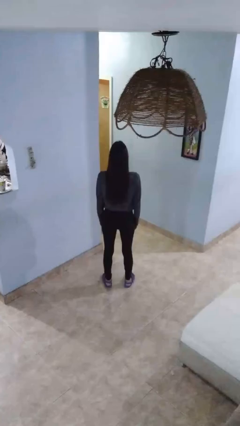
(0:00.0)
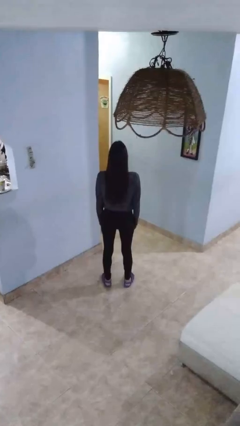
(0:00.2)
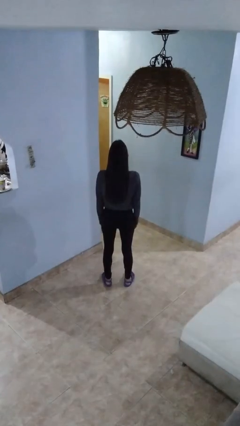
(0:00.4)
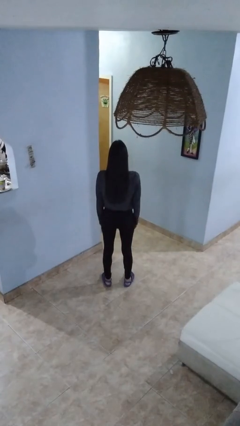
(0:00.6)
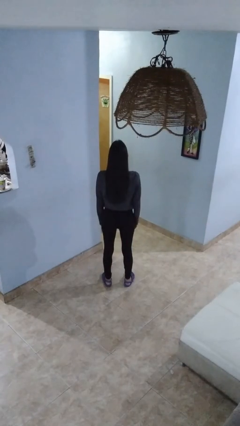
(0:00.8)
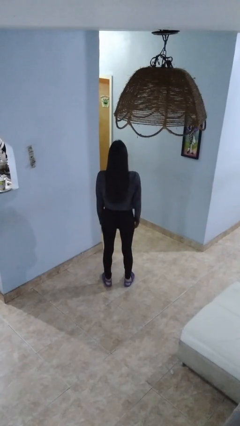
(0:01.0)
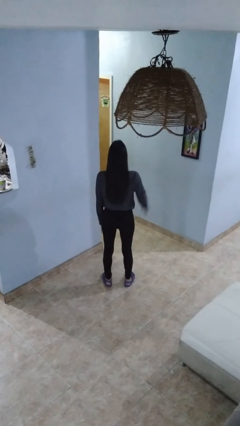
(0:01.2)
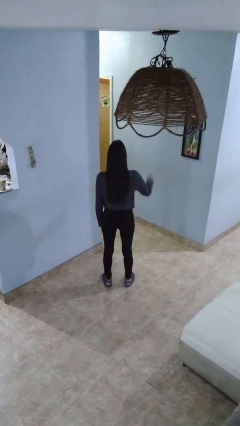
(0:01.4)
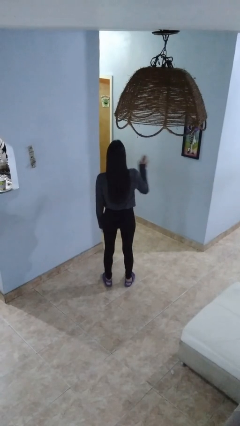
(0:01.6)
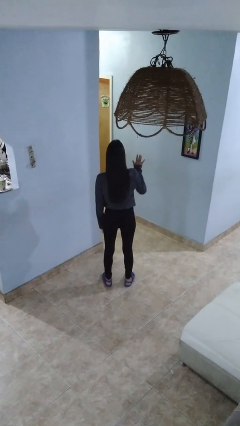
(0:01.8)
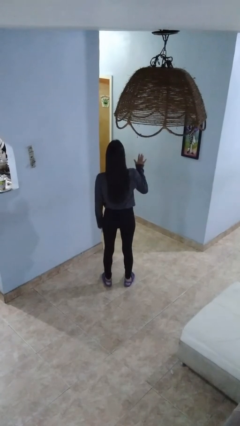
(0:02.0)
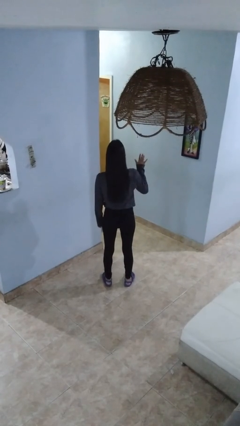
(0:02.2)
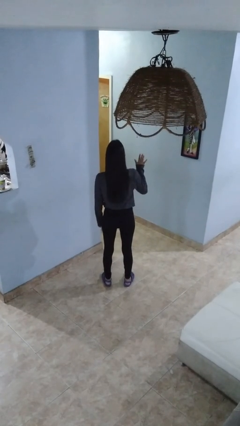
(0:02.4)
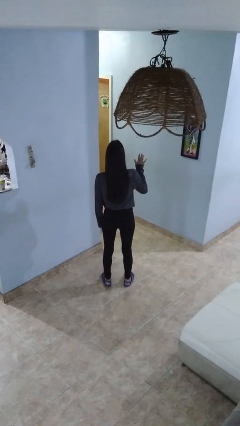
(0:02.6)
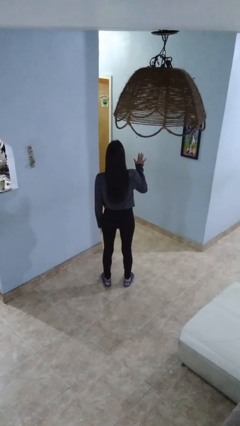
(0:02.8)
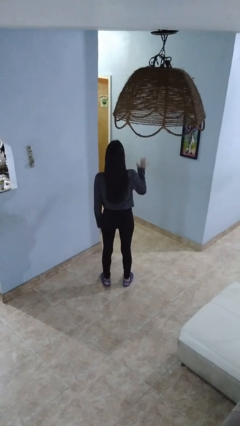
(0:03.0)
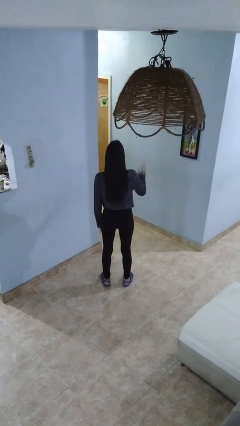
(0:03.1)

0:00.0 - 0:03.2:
person gestures stop

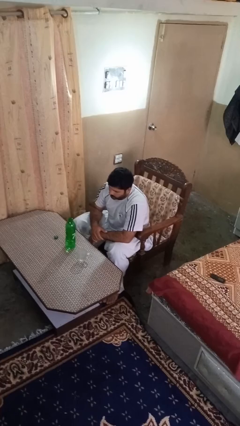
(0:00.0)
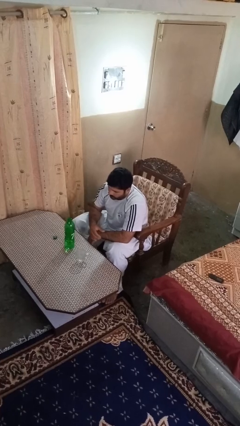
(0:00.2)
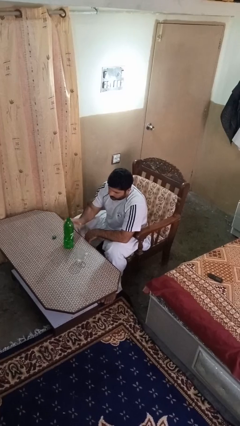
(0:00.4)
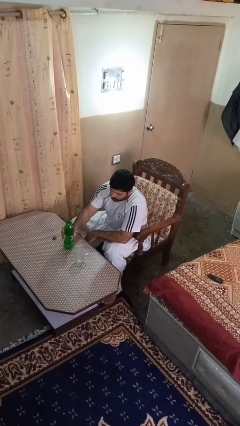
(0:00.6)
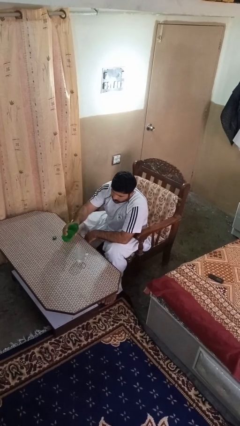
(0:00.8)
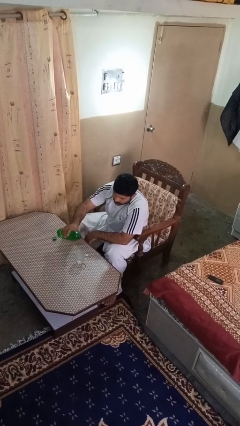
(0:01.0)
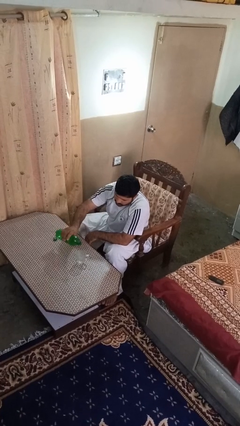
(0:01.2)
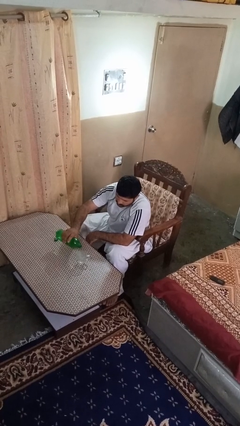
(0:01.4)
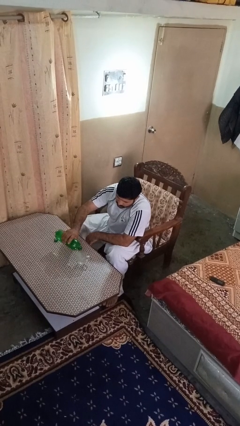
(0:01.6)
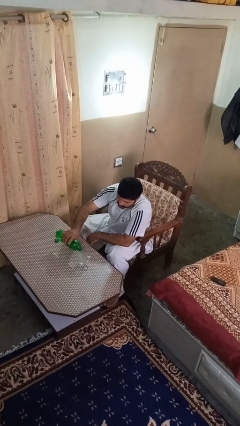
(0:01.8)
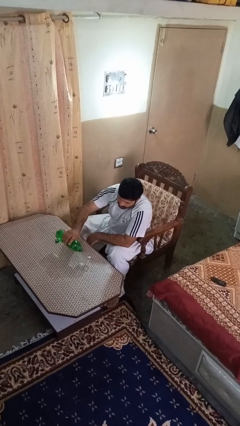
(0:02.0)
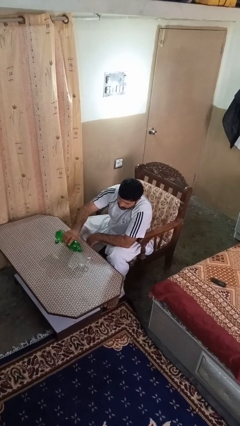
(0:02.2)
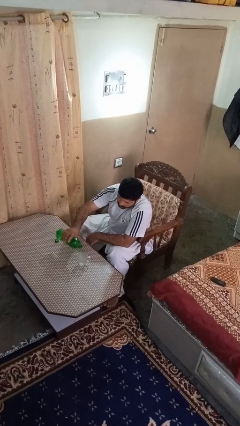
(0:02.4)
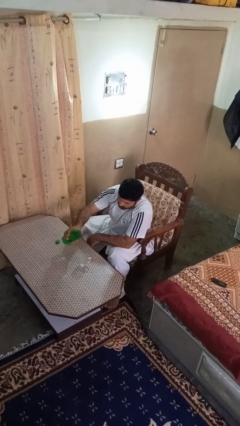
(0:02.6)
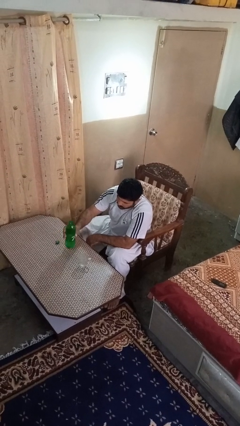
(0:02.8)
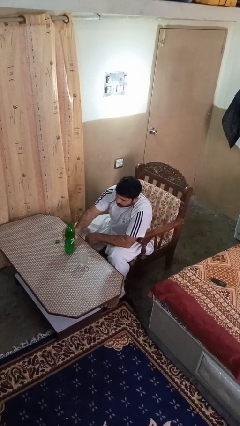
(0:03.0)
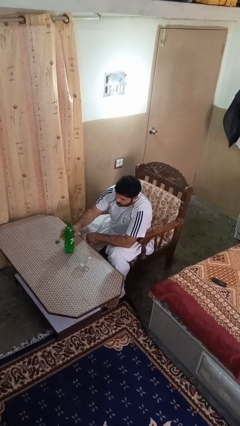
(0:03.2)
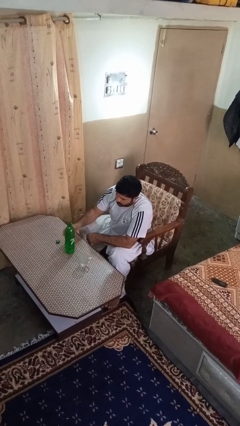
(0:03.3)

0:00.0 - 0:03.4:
person pours liquid into cup

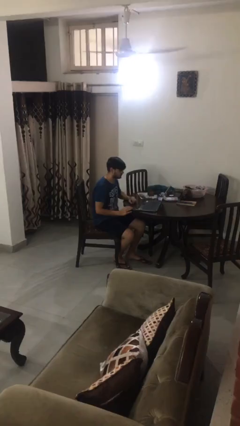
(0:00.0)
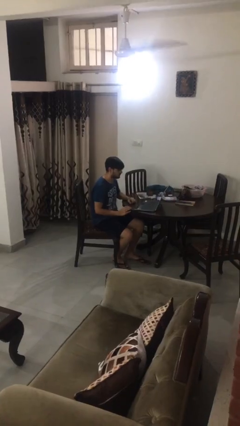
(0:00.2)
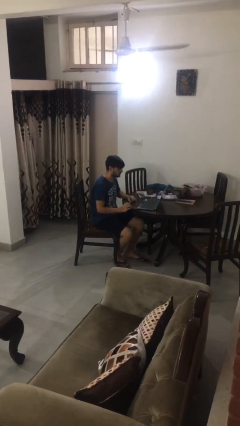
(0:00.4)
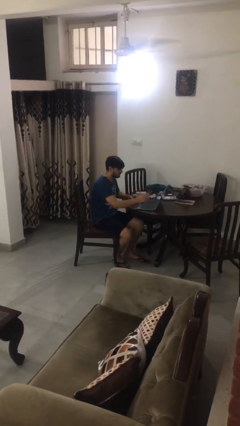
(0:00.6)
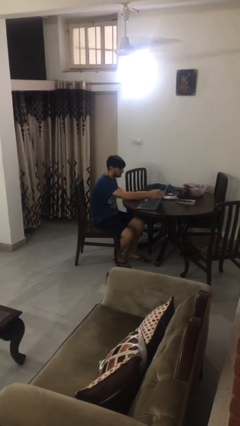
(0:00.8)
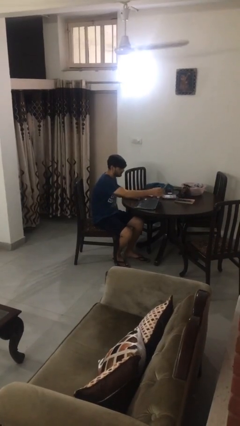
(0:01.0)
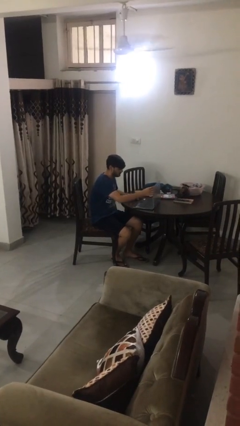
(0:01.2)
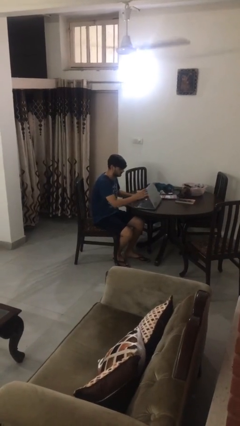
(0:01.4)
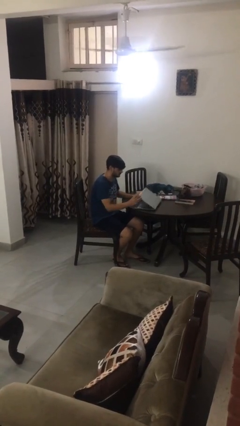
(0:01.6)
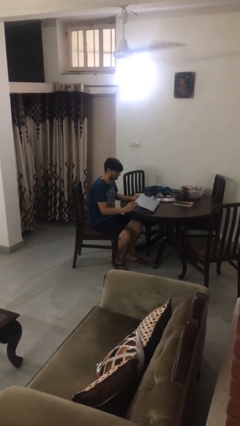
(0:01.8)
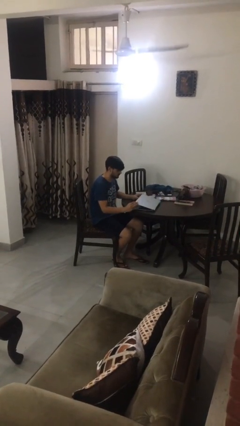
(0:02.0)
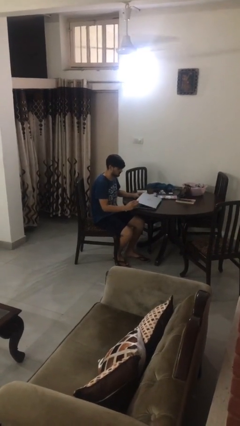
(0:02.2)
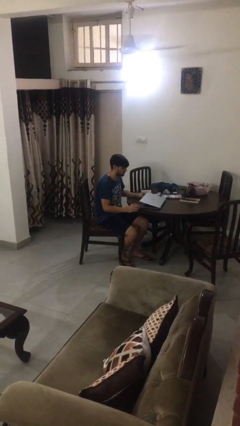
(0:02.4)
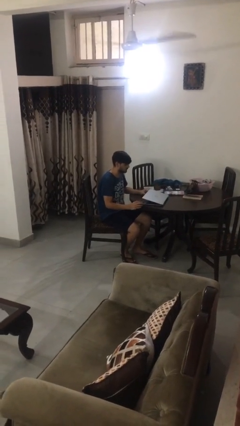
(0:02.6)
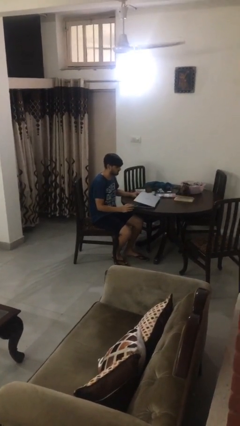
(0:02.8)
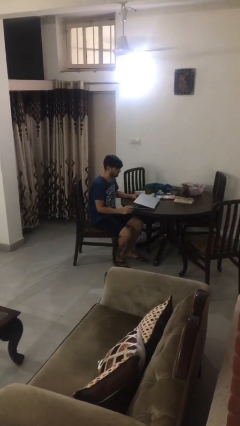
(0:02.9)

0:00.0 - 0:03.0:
person closes laptop

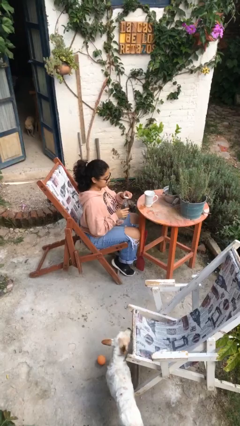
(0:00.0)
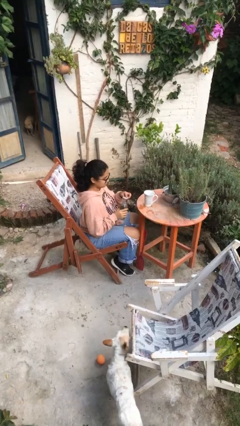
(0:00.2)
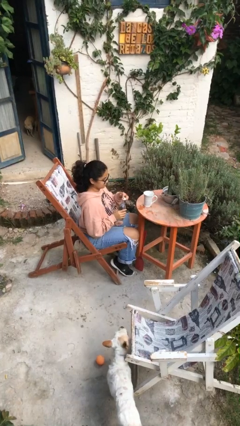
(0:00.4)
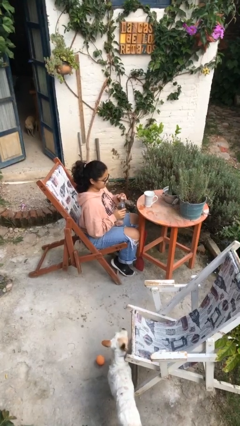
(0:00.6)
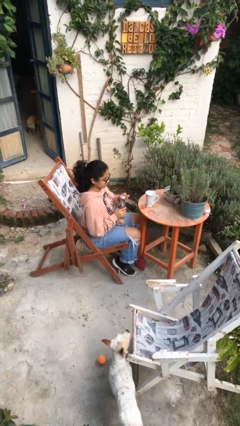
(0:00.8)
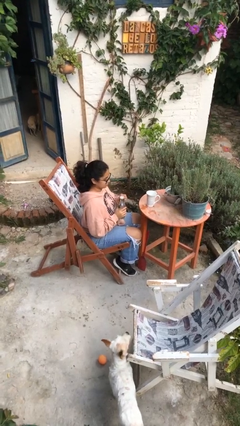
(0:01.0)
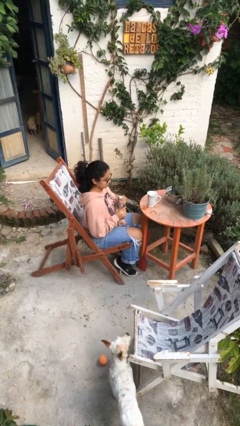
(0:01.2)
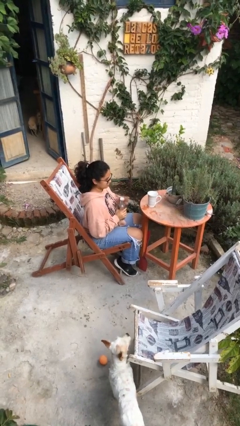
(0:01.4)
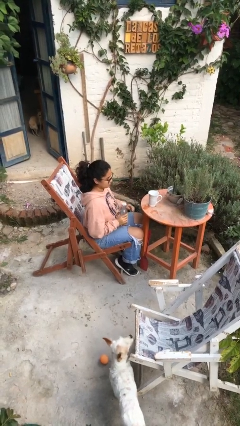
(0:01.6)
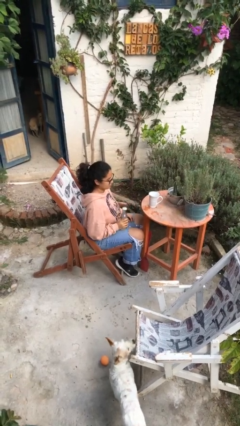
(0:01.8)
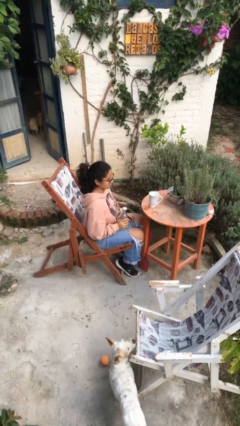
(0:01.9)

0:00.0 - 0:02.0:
person screws lid to bottle

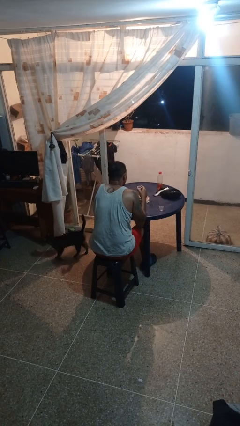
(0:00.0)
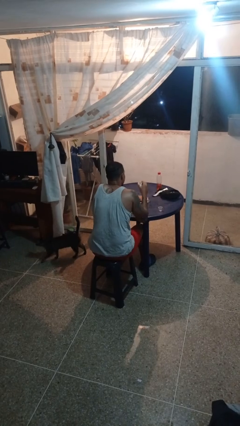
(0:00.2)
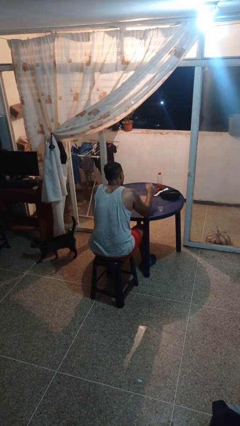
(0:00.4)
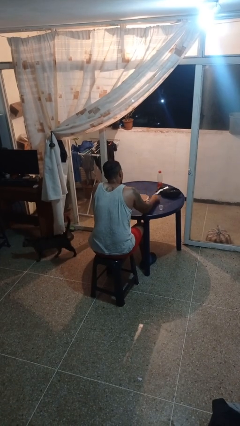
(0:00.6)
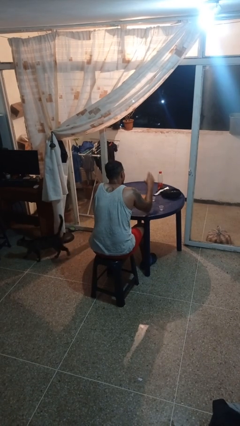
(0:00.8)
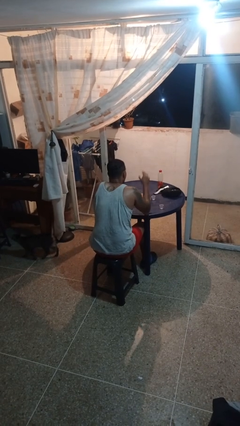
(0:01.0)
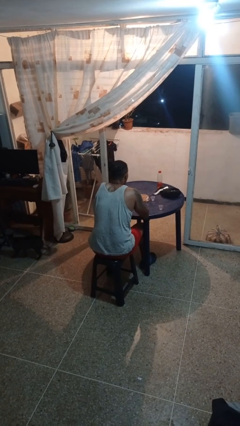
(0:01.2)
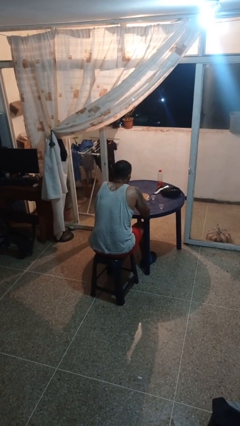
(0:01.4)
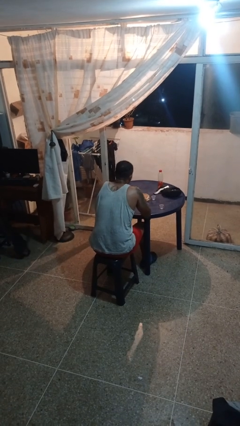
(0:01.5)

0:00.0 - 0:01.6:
person puts down object on table

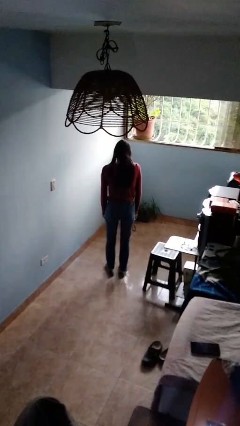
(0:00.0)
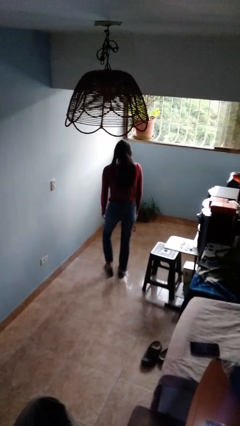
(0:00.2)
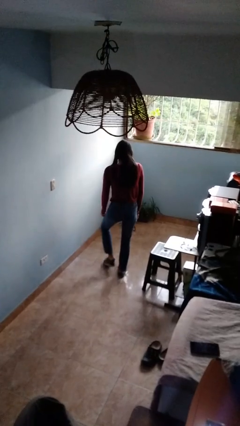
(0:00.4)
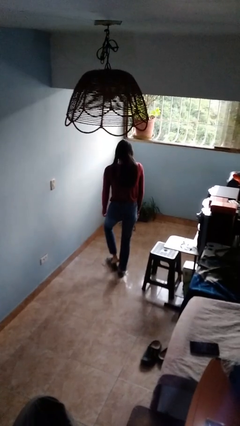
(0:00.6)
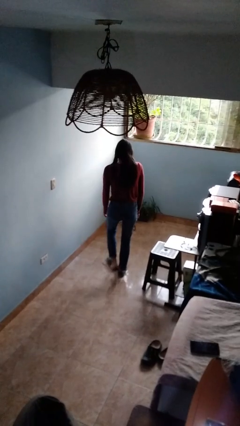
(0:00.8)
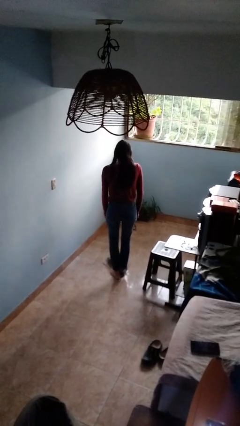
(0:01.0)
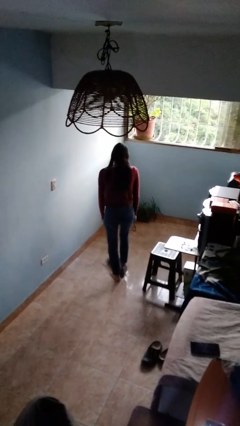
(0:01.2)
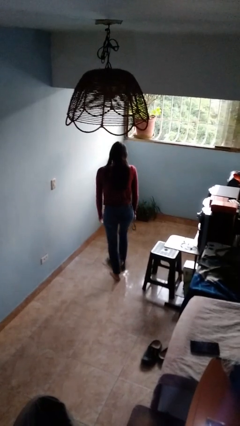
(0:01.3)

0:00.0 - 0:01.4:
person takes off shoes

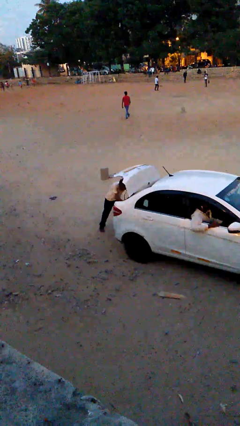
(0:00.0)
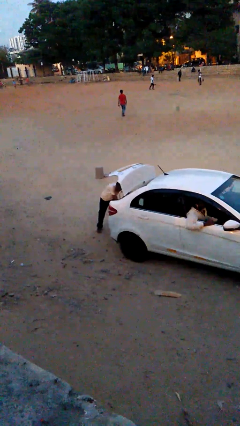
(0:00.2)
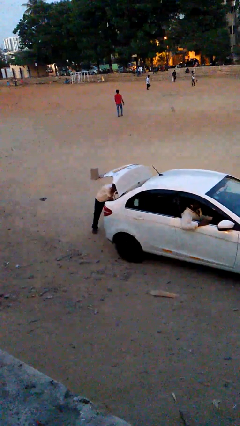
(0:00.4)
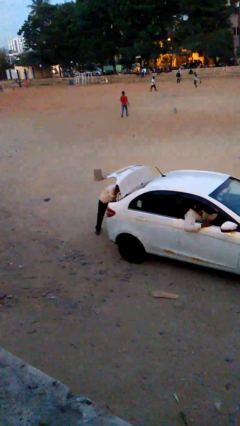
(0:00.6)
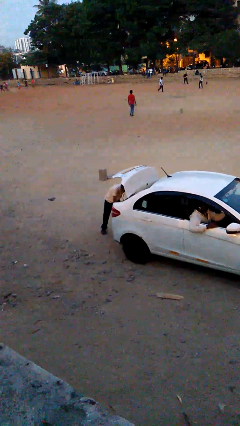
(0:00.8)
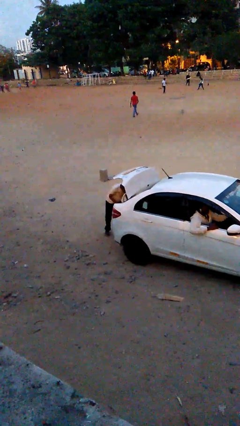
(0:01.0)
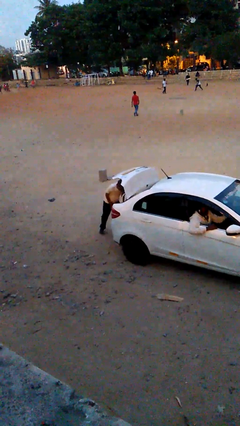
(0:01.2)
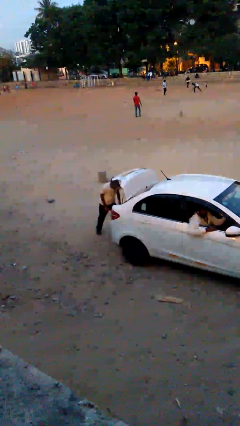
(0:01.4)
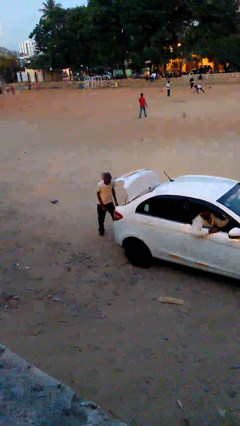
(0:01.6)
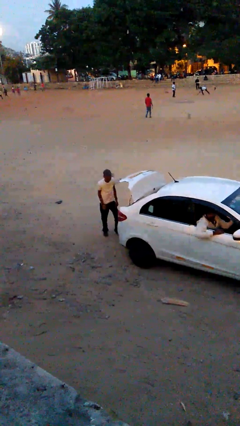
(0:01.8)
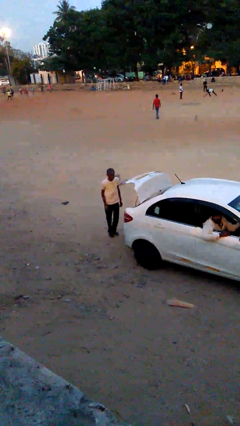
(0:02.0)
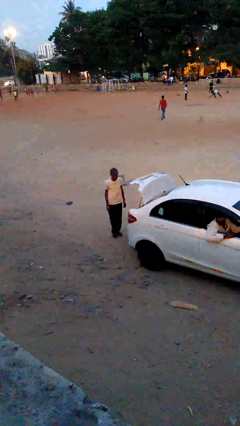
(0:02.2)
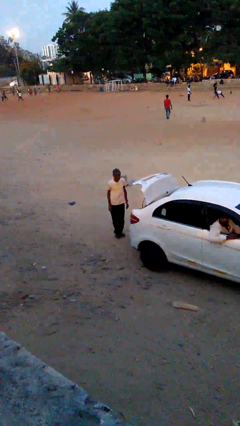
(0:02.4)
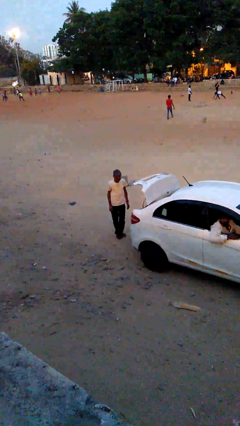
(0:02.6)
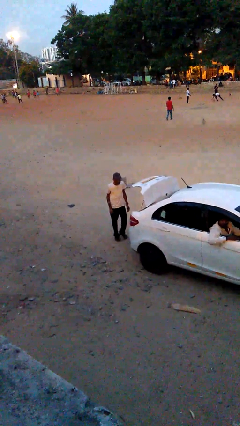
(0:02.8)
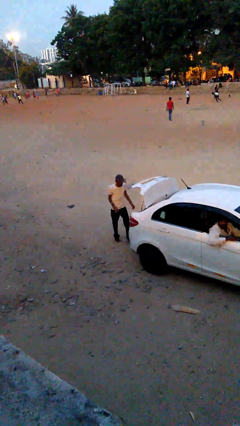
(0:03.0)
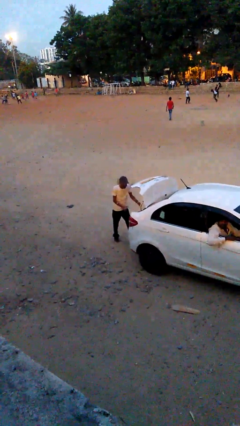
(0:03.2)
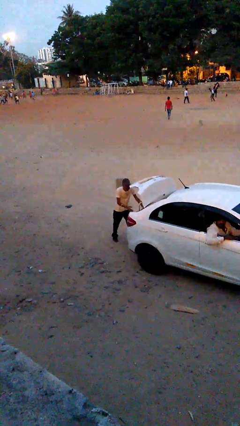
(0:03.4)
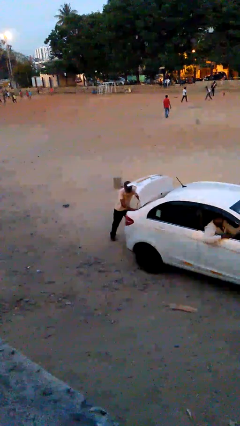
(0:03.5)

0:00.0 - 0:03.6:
person loads car
